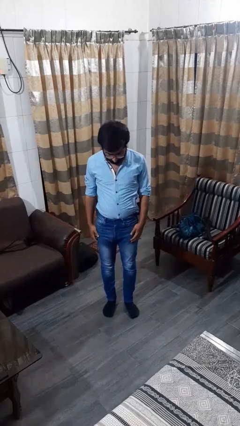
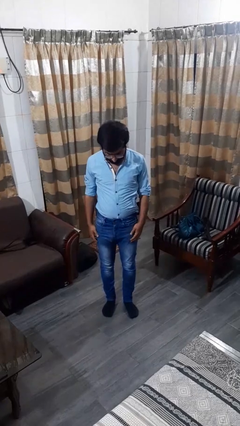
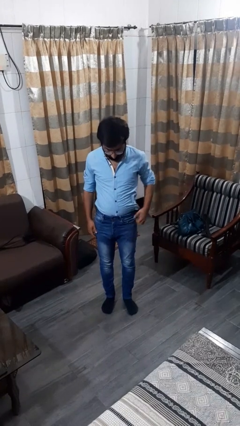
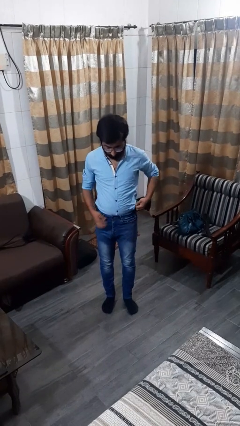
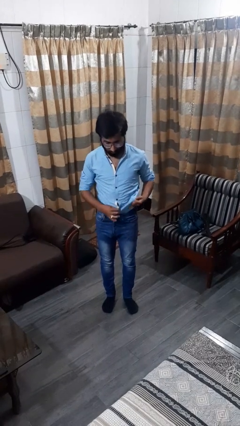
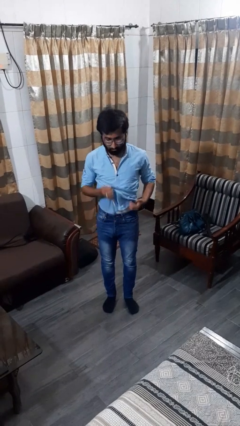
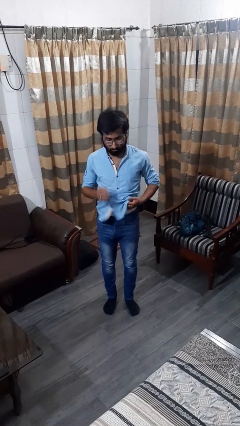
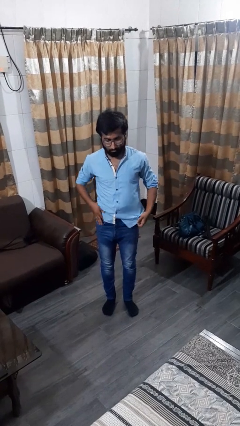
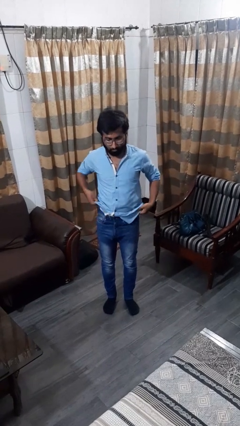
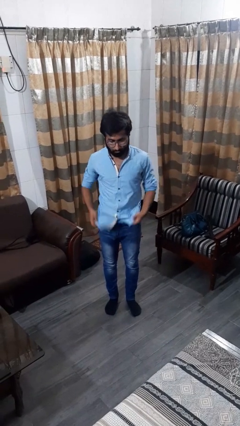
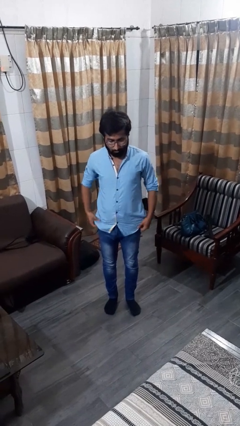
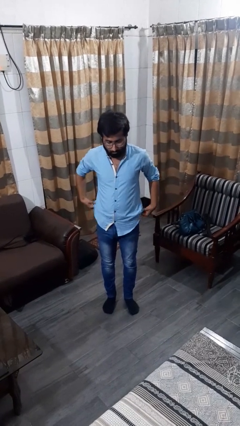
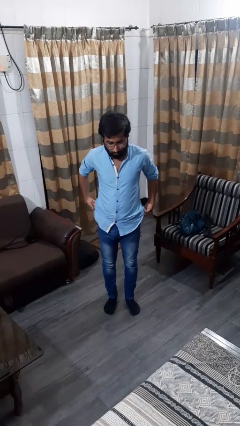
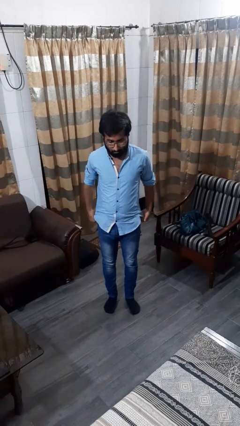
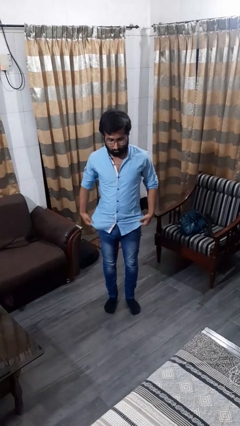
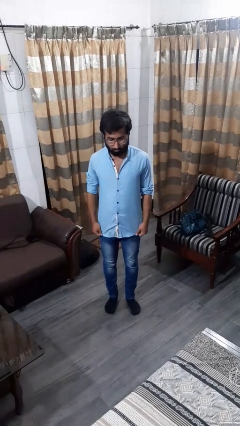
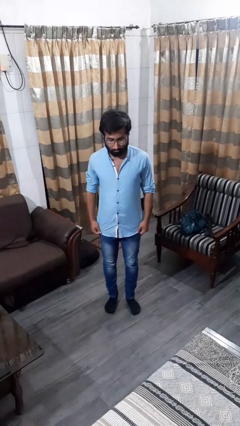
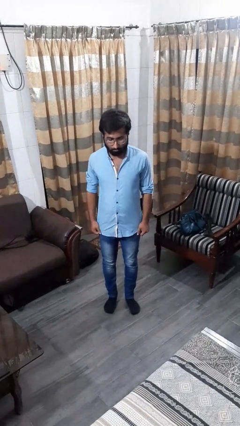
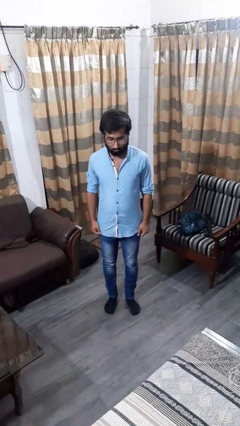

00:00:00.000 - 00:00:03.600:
person untucks shirt

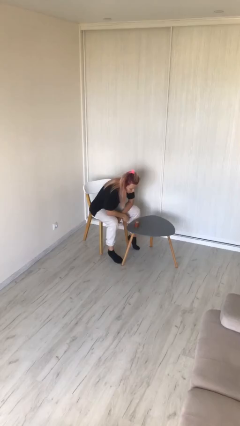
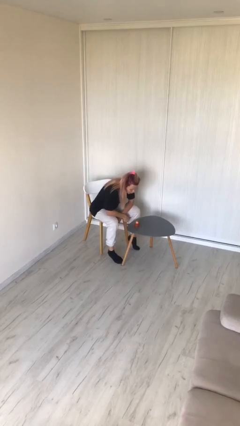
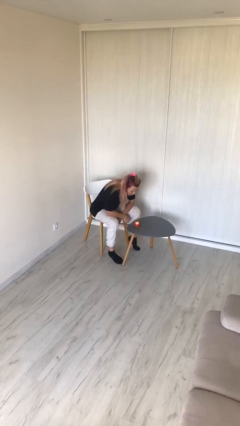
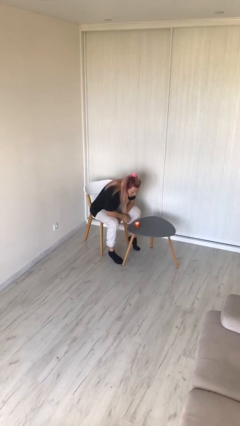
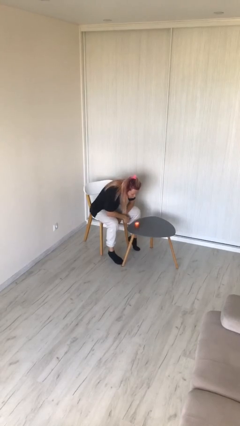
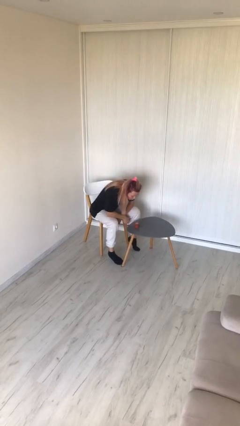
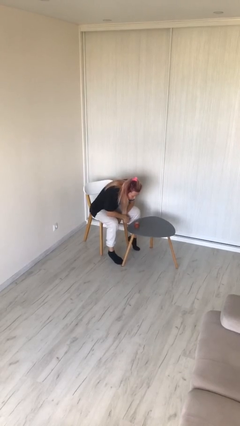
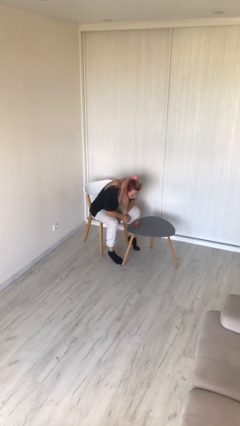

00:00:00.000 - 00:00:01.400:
person extinguishes candle

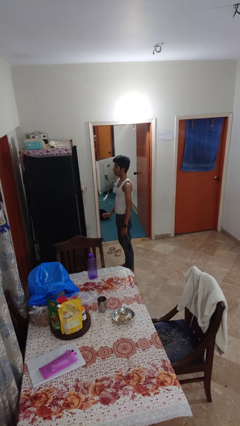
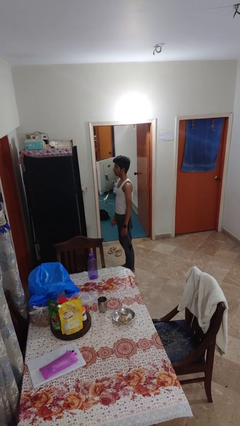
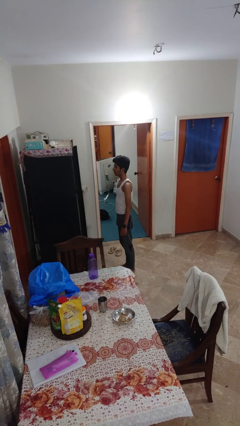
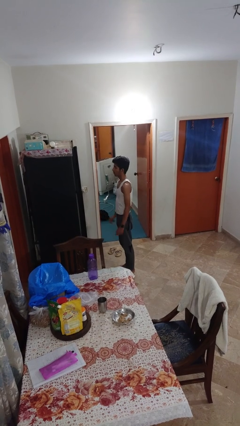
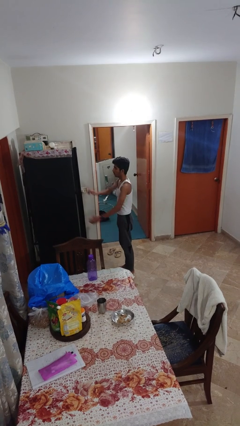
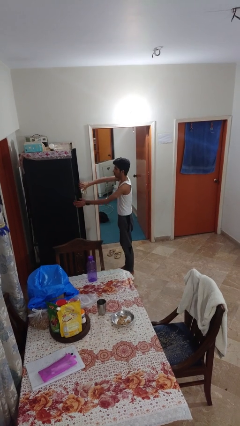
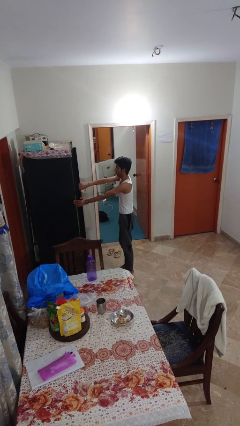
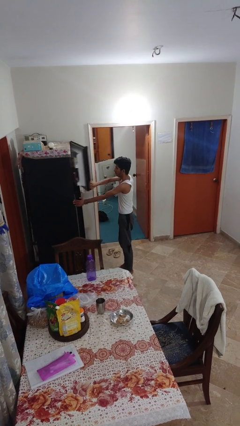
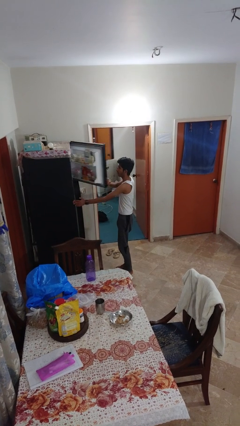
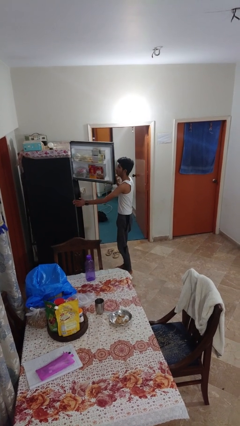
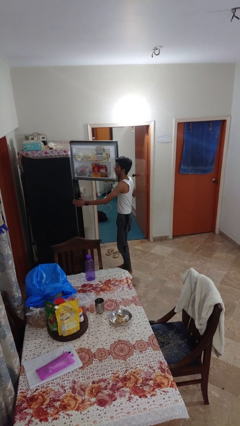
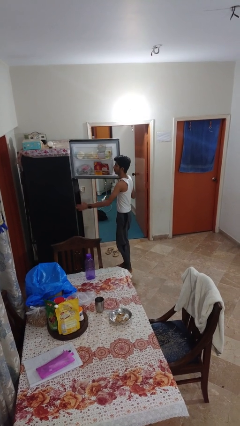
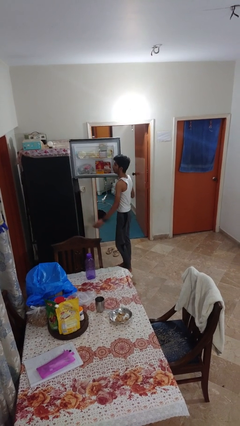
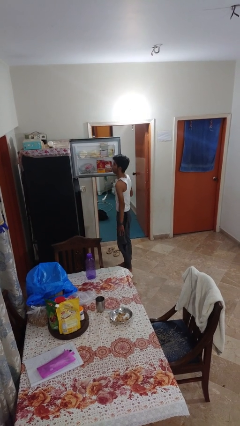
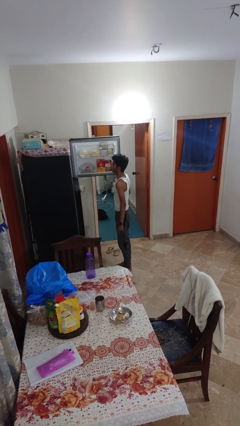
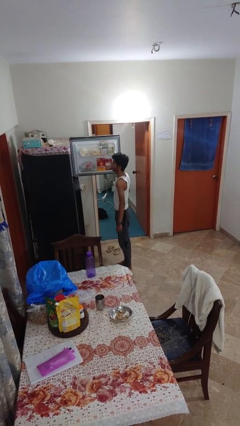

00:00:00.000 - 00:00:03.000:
person opens refrigerator

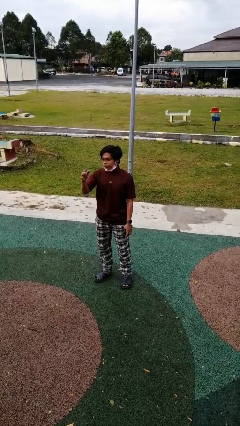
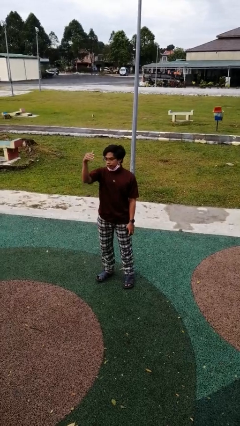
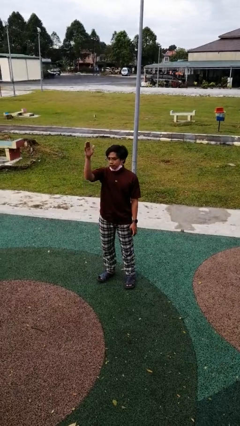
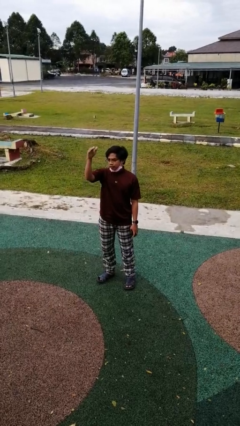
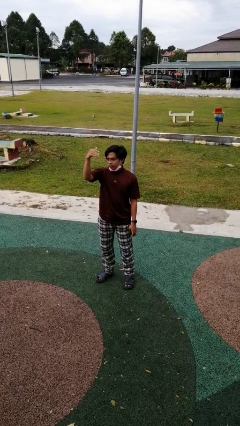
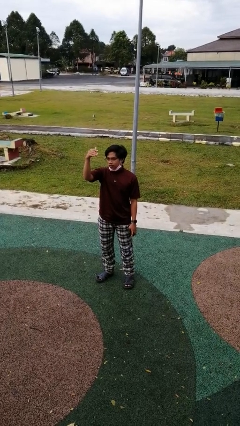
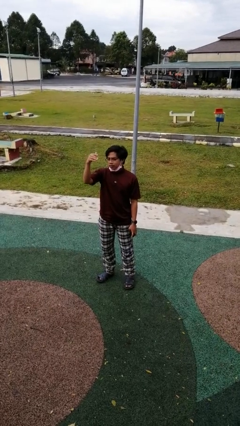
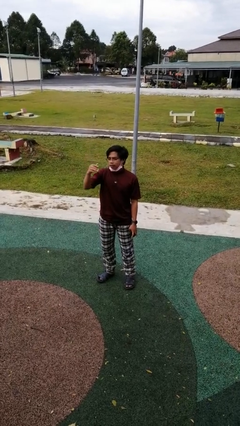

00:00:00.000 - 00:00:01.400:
person gestures come here

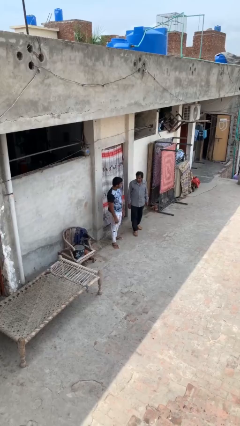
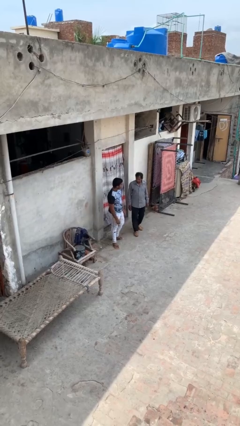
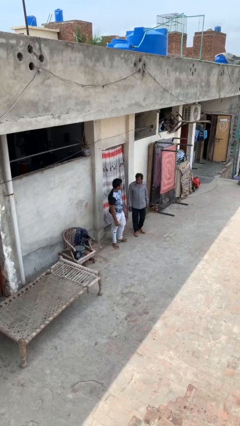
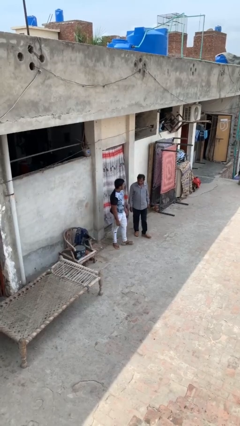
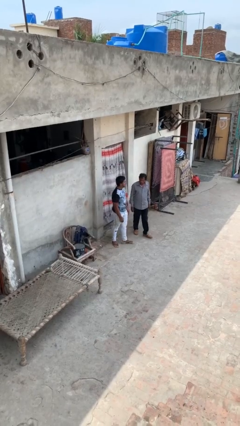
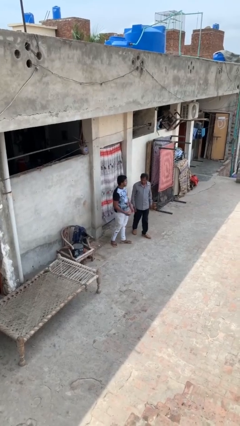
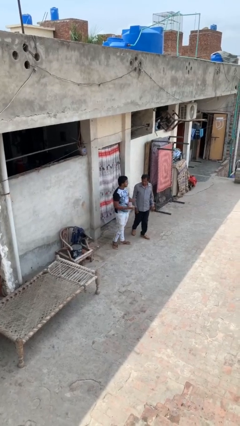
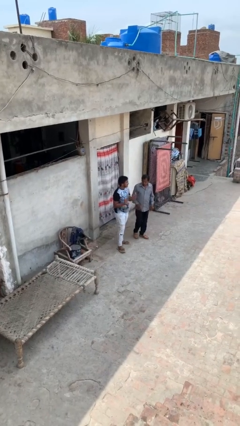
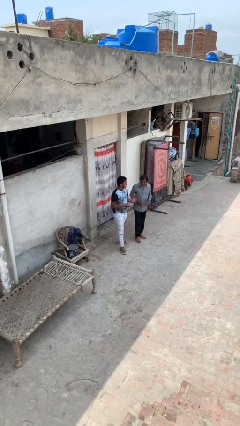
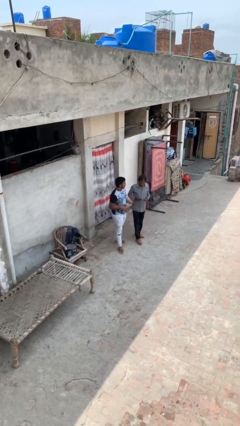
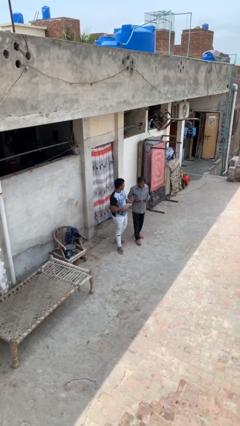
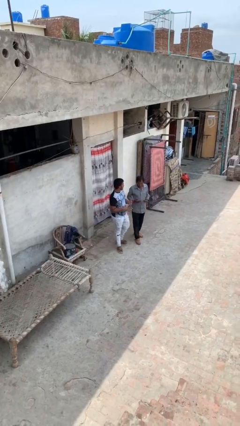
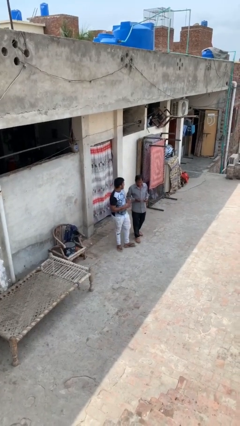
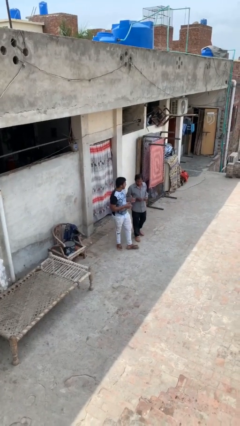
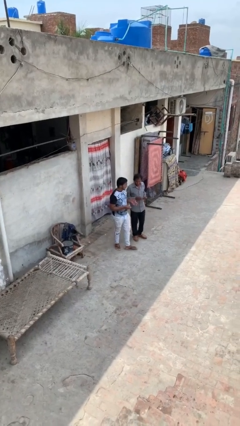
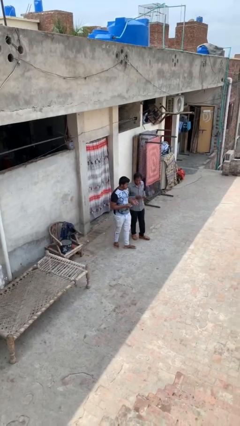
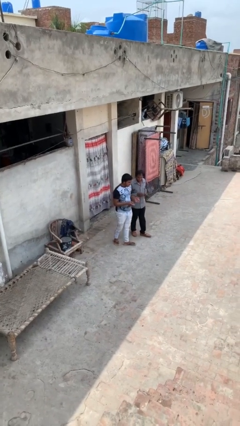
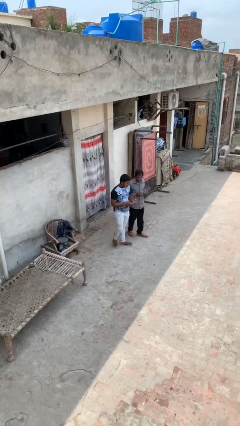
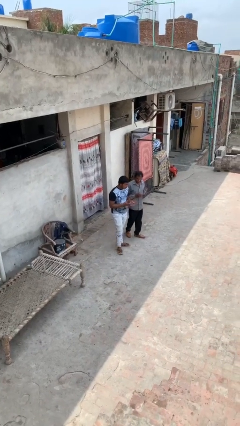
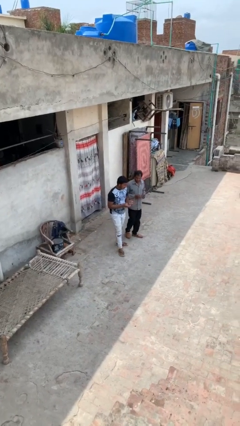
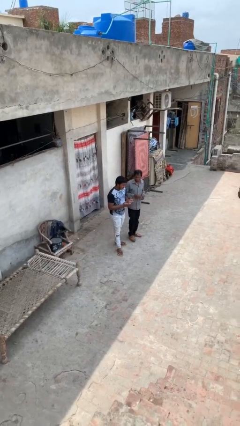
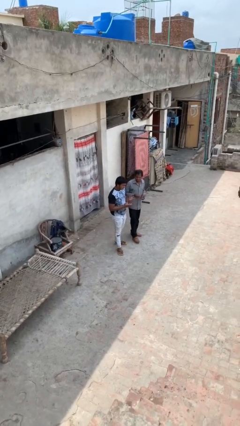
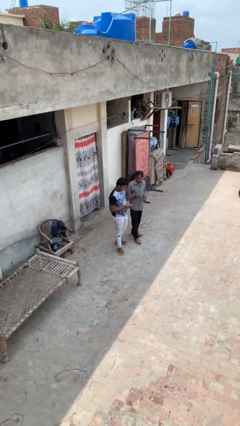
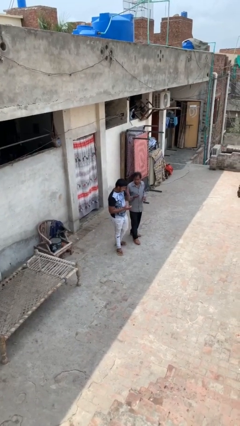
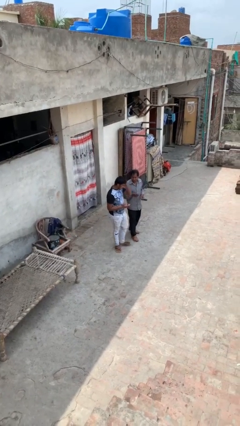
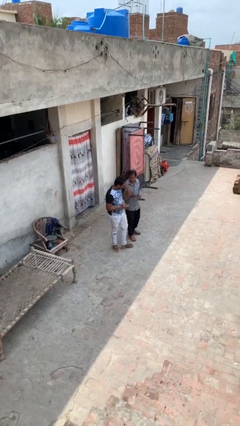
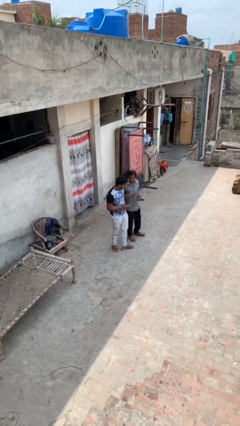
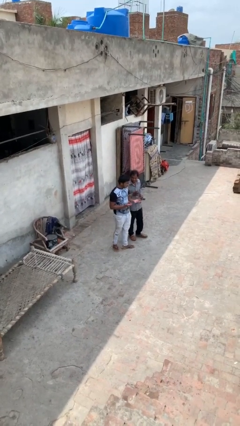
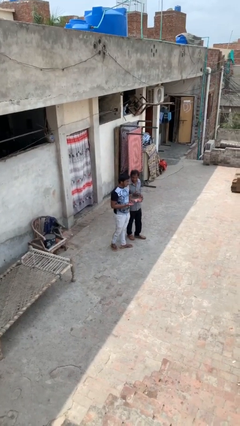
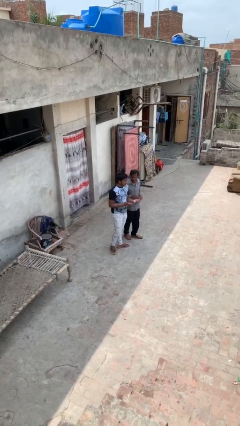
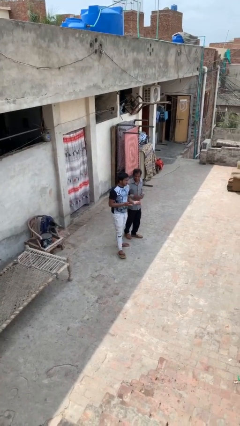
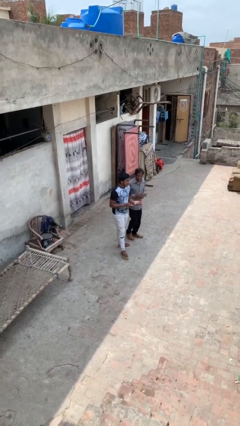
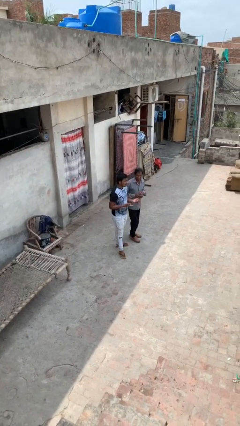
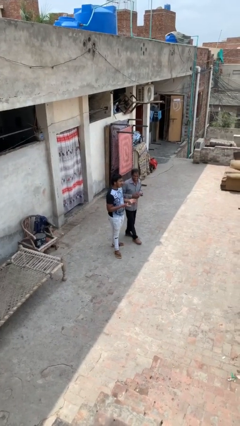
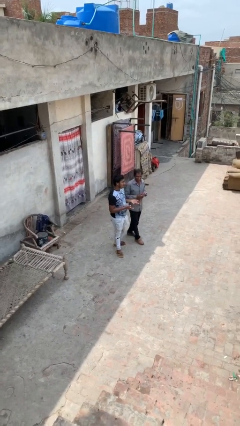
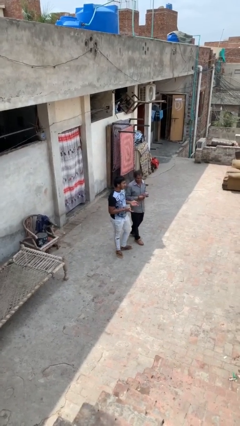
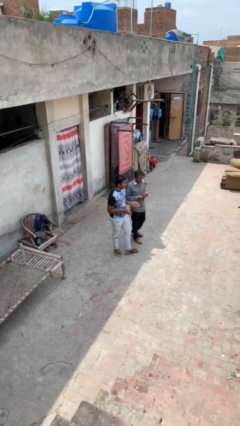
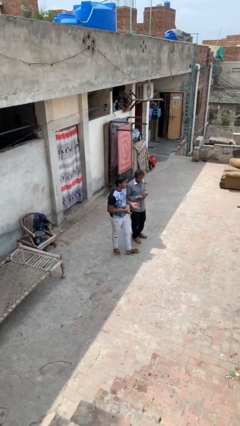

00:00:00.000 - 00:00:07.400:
person talks to person

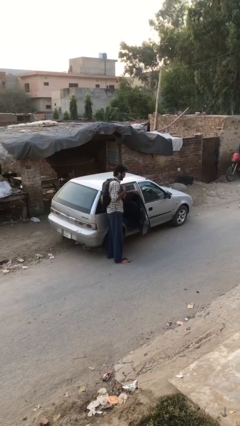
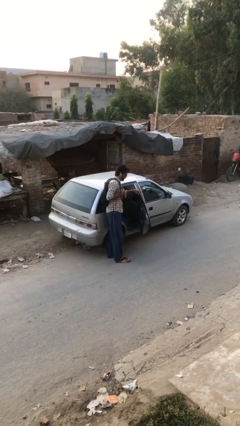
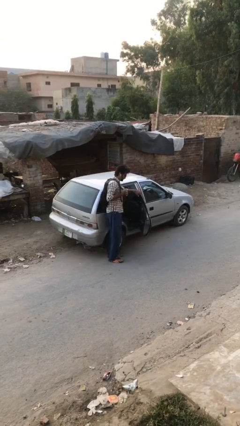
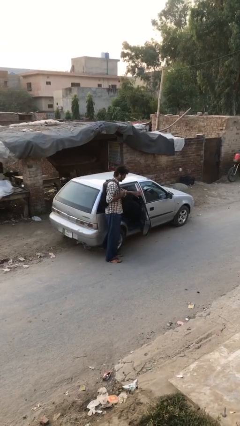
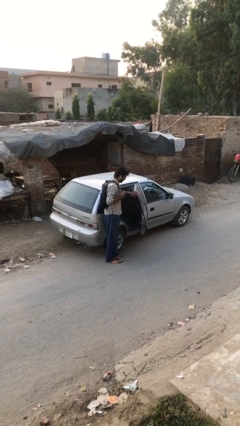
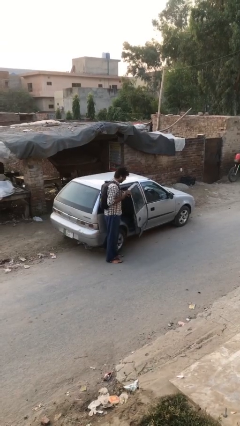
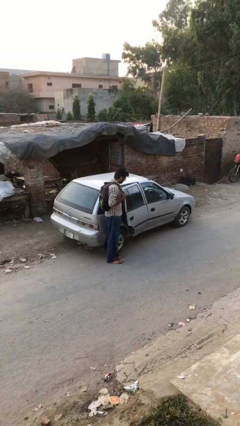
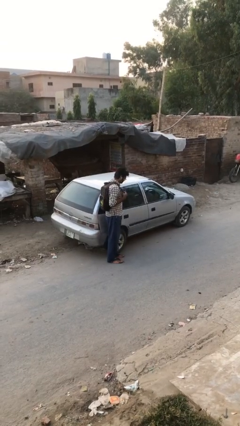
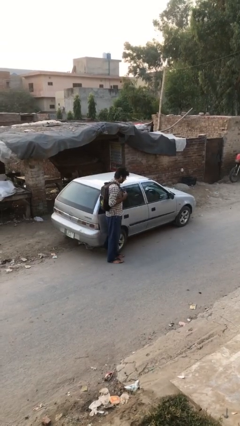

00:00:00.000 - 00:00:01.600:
person closes car door
